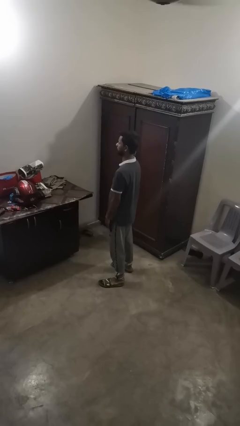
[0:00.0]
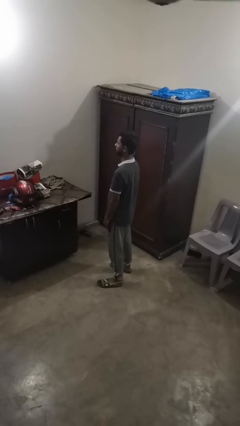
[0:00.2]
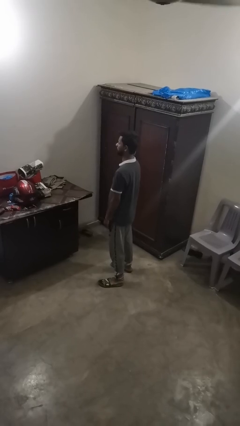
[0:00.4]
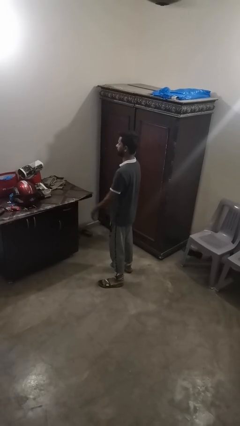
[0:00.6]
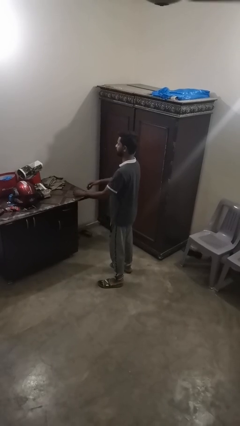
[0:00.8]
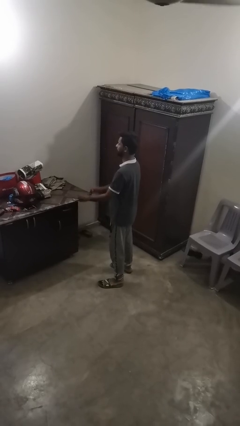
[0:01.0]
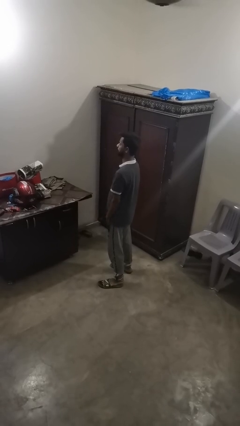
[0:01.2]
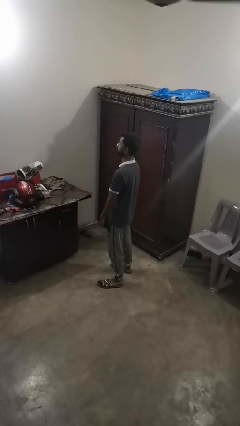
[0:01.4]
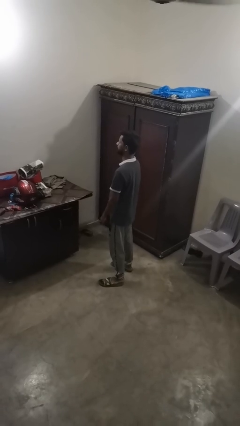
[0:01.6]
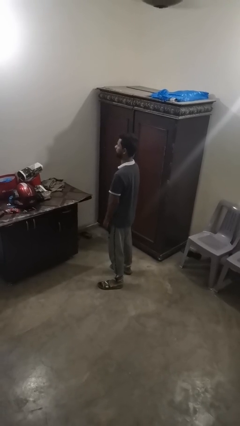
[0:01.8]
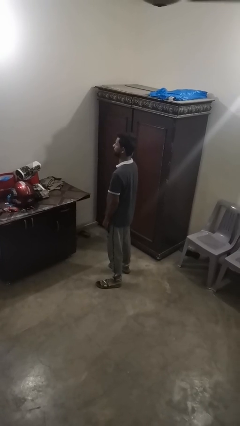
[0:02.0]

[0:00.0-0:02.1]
person slaps hands on thighs

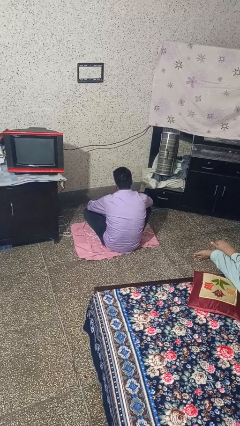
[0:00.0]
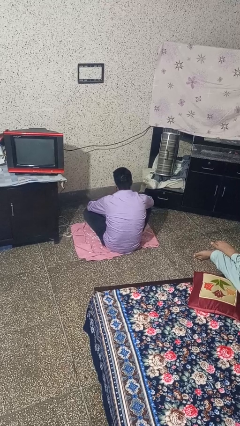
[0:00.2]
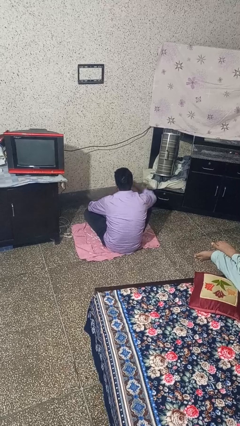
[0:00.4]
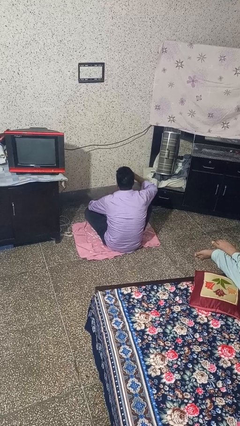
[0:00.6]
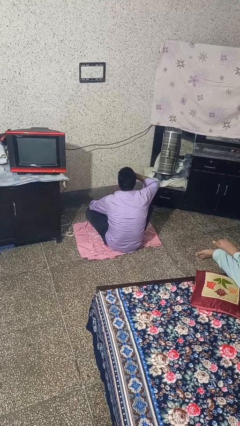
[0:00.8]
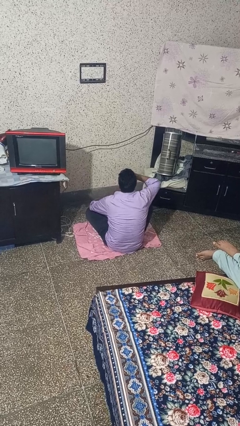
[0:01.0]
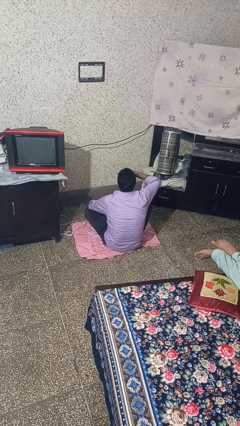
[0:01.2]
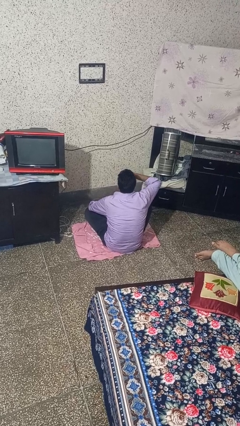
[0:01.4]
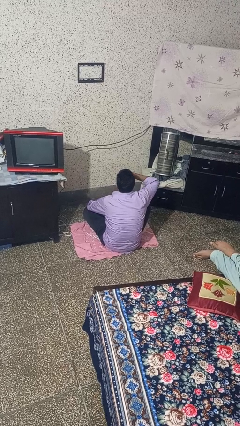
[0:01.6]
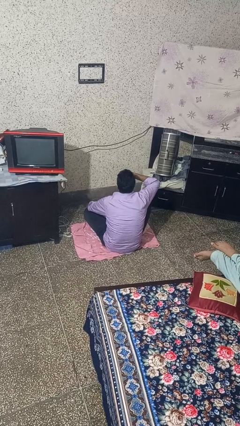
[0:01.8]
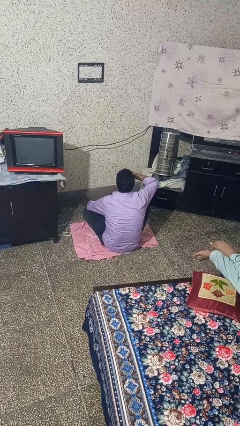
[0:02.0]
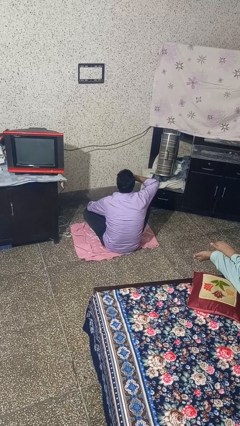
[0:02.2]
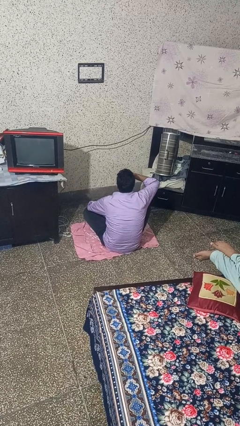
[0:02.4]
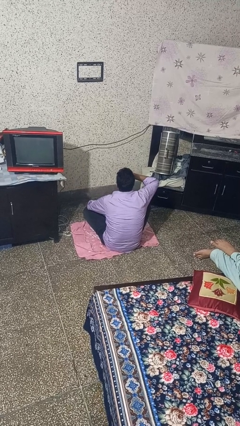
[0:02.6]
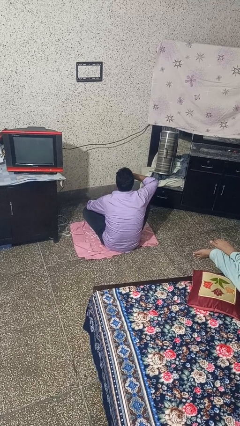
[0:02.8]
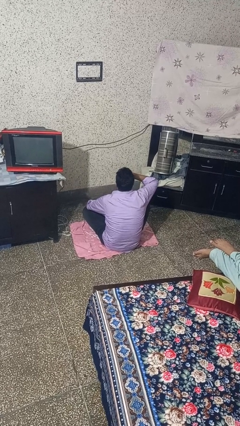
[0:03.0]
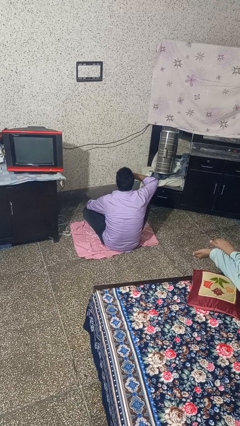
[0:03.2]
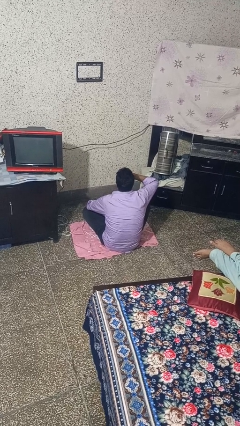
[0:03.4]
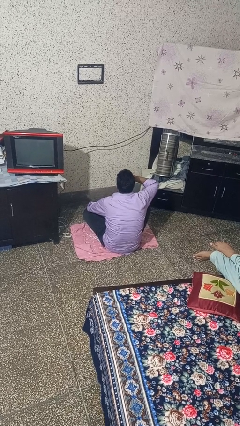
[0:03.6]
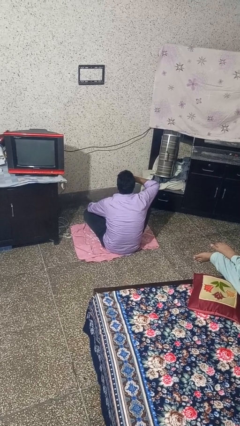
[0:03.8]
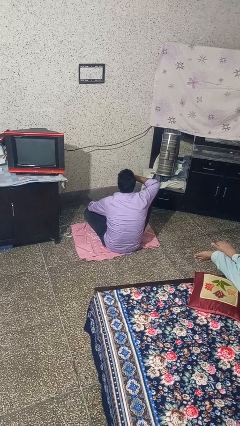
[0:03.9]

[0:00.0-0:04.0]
person yawns

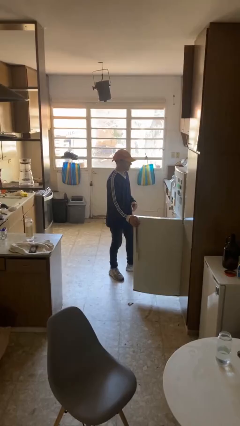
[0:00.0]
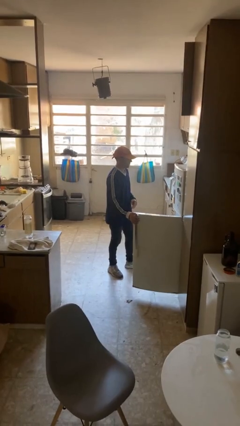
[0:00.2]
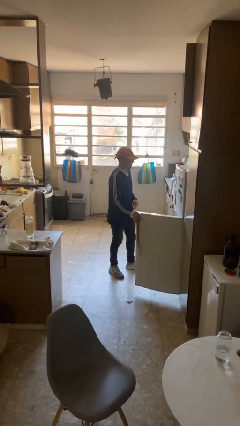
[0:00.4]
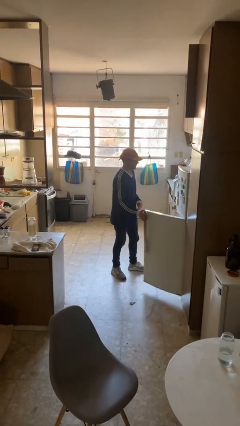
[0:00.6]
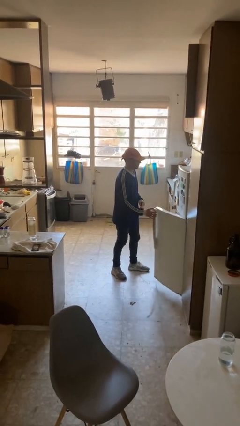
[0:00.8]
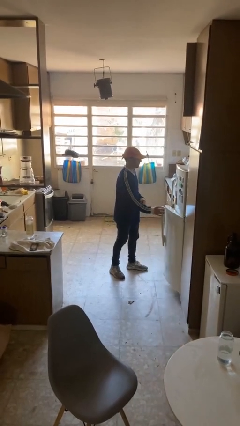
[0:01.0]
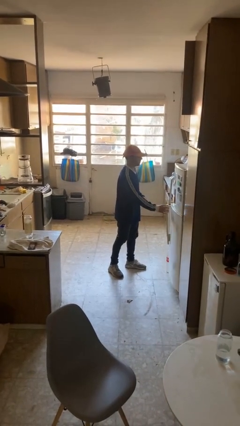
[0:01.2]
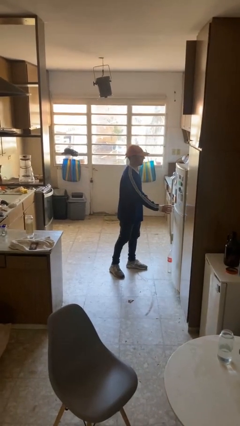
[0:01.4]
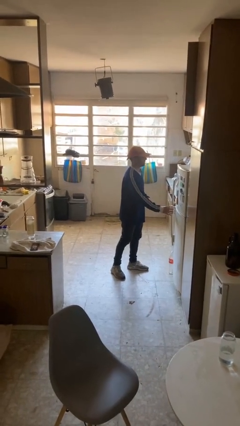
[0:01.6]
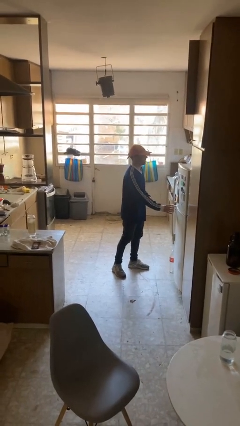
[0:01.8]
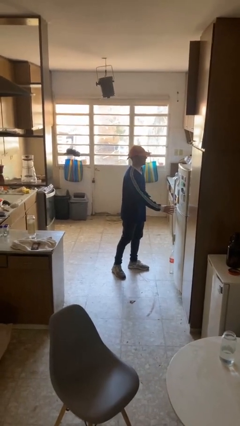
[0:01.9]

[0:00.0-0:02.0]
person closes refrigerator

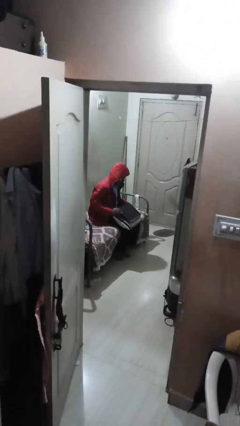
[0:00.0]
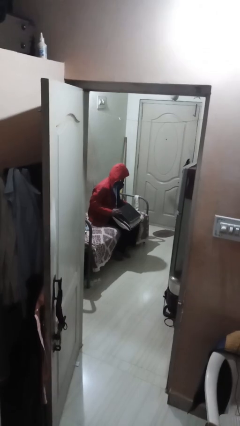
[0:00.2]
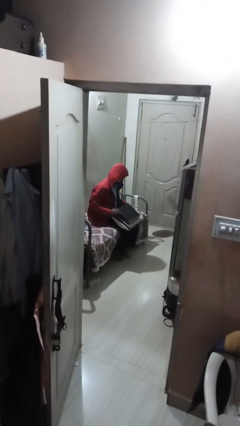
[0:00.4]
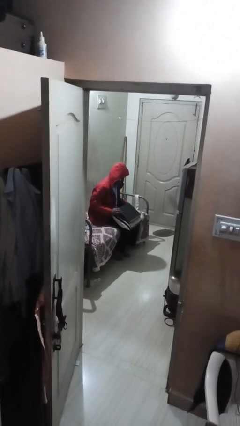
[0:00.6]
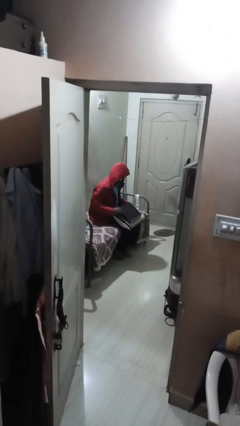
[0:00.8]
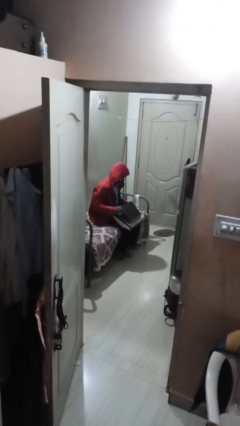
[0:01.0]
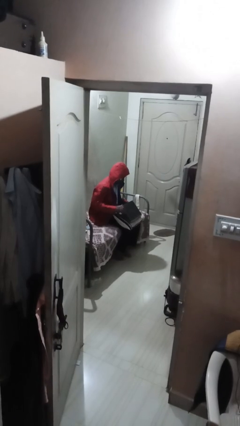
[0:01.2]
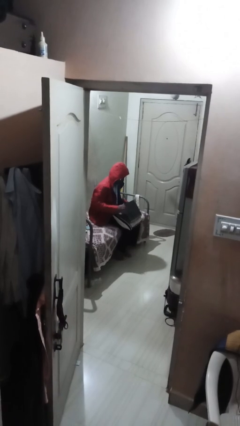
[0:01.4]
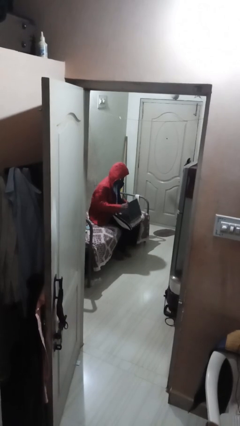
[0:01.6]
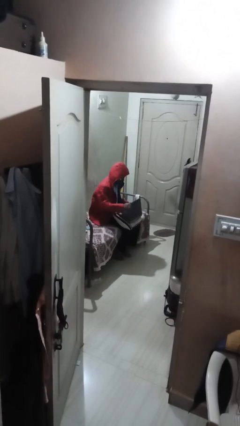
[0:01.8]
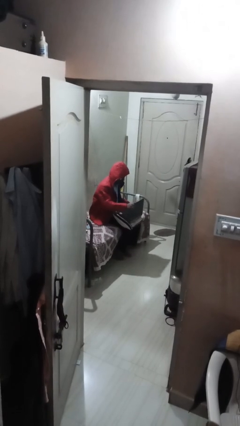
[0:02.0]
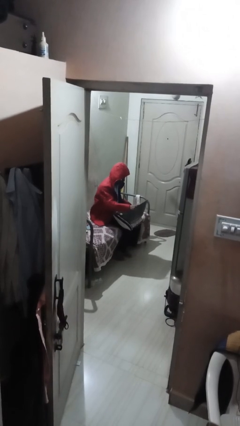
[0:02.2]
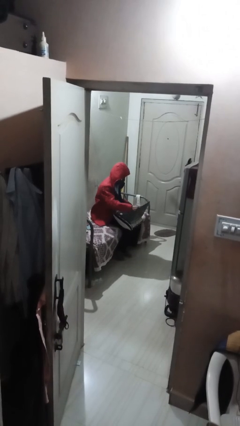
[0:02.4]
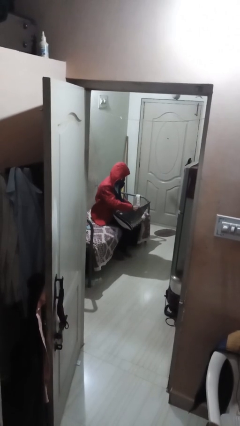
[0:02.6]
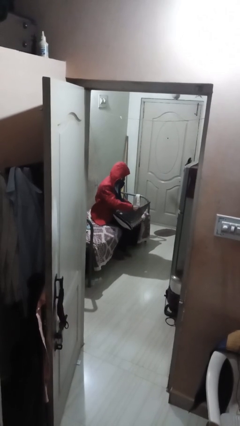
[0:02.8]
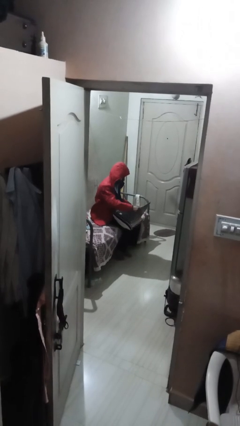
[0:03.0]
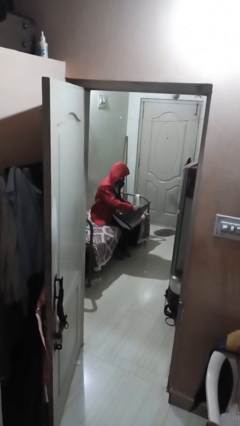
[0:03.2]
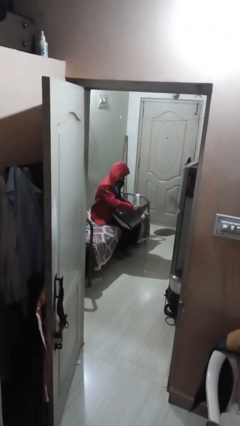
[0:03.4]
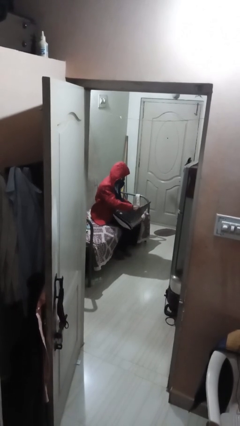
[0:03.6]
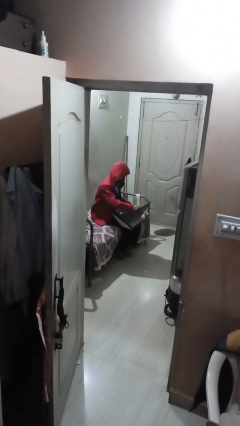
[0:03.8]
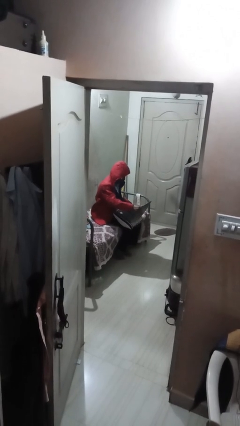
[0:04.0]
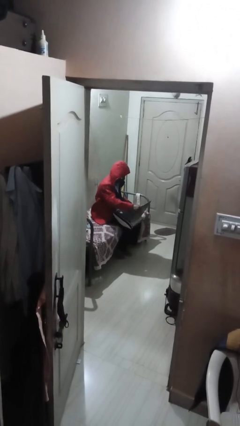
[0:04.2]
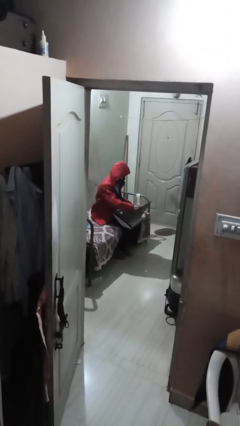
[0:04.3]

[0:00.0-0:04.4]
person interacts with laptop

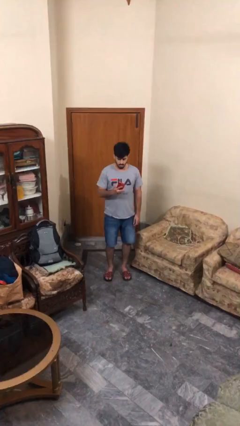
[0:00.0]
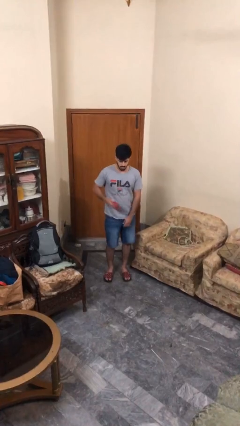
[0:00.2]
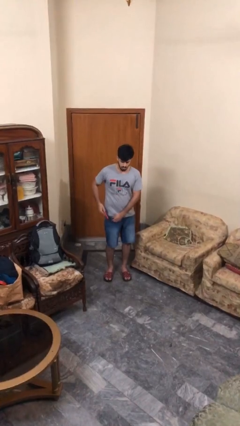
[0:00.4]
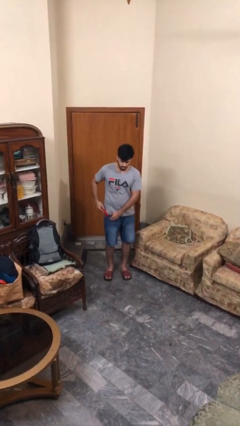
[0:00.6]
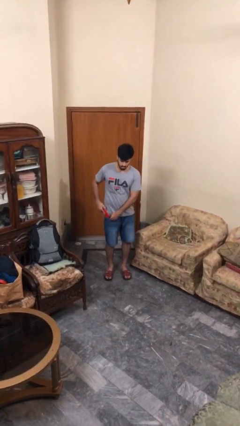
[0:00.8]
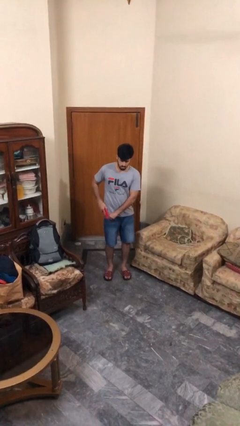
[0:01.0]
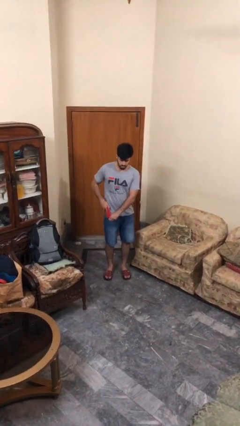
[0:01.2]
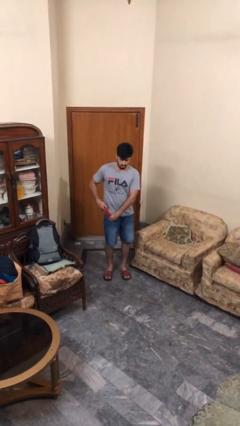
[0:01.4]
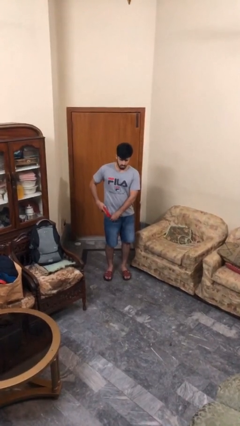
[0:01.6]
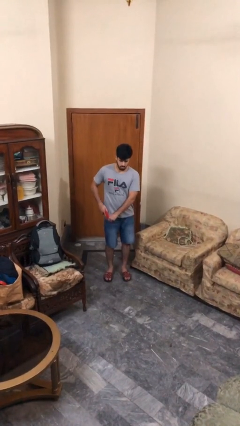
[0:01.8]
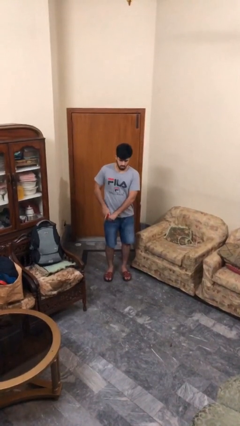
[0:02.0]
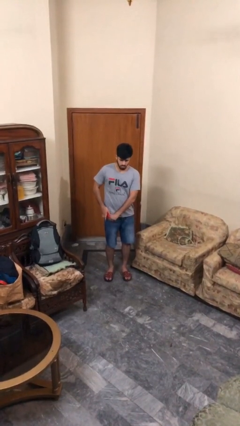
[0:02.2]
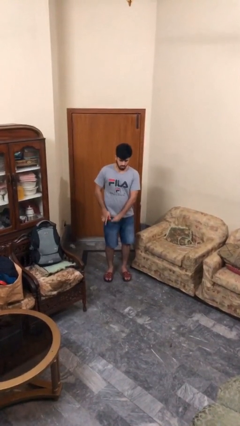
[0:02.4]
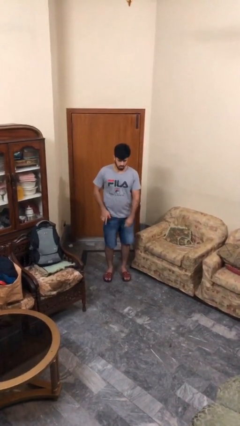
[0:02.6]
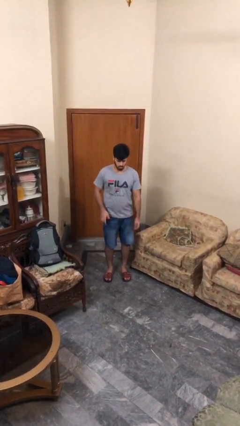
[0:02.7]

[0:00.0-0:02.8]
person puts phone into pocket

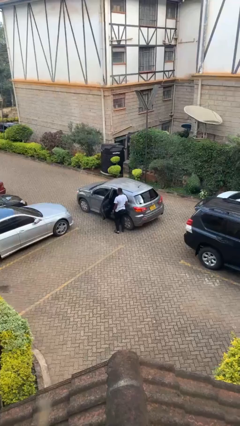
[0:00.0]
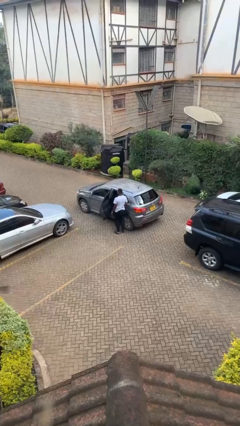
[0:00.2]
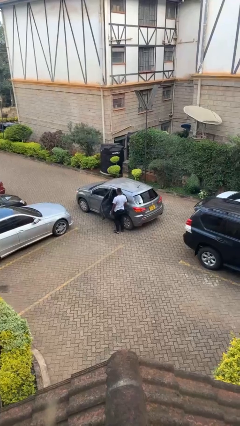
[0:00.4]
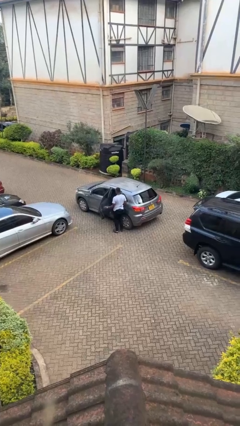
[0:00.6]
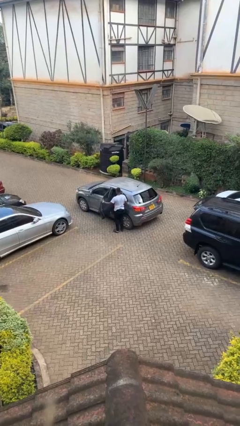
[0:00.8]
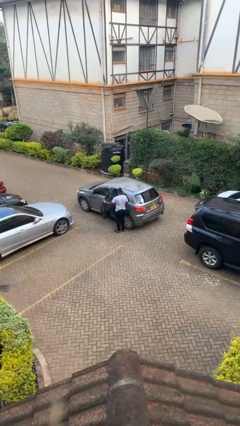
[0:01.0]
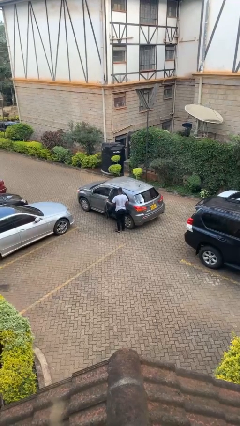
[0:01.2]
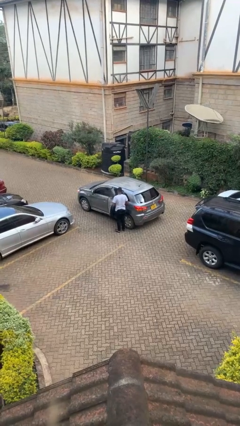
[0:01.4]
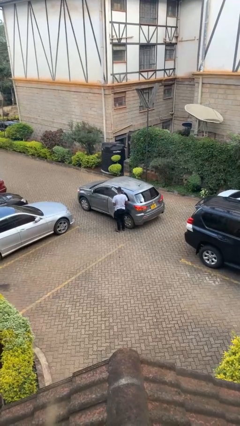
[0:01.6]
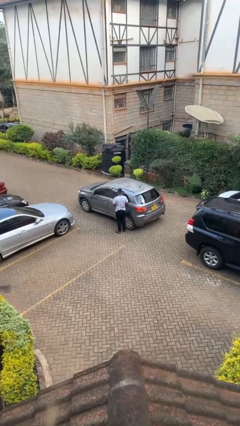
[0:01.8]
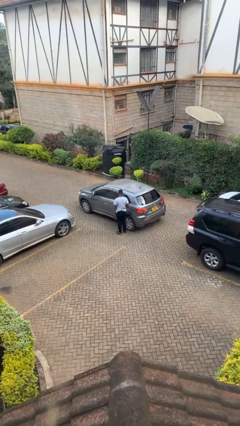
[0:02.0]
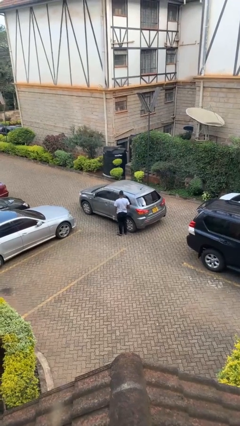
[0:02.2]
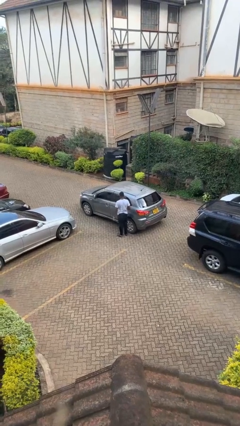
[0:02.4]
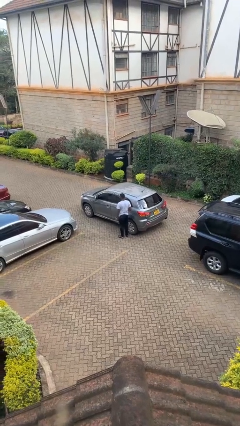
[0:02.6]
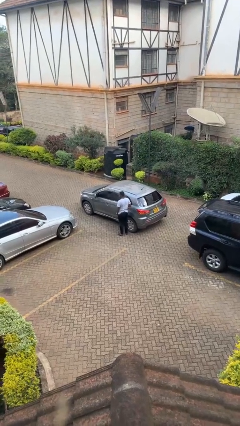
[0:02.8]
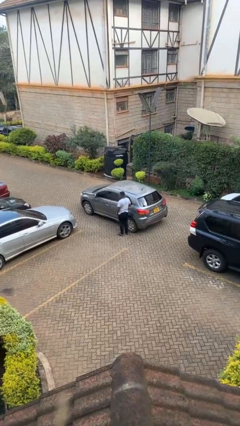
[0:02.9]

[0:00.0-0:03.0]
person closes car door
